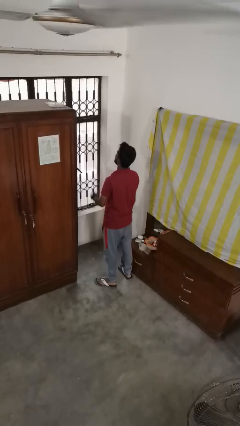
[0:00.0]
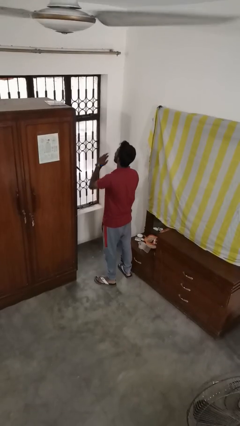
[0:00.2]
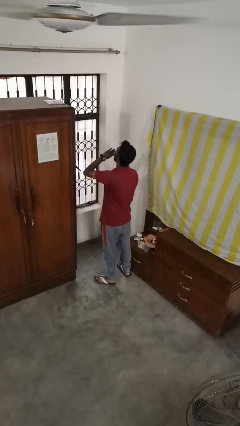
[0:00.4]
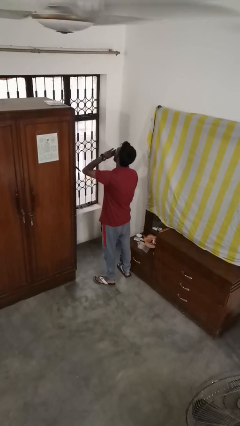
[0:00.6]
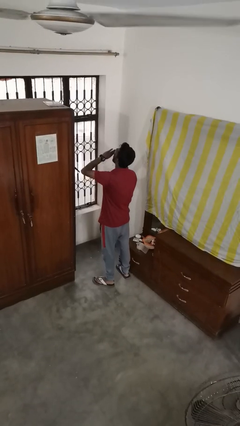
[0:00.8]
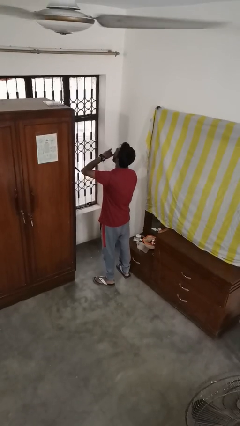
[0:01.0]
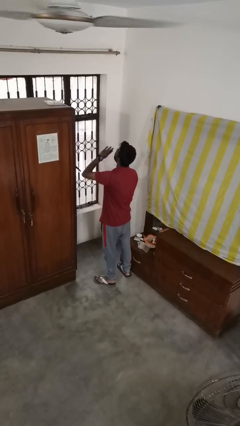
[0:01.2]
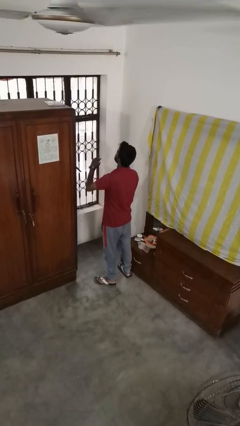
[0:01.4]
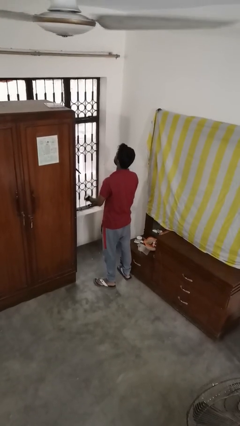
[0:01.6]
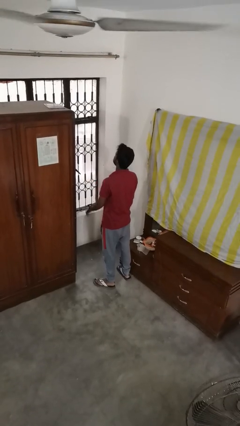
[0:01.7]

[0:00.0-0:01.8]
person yawns

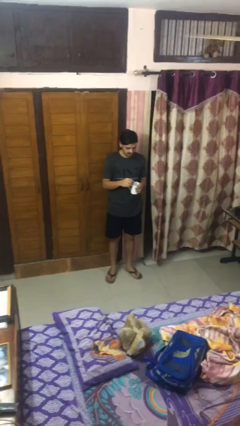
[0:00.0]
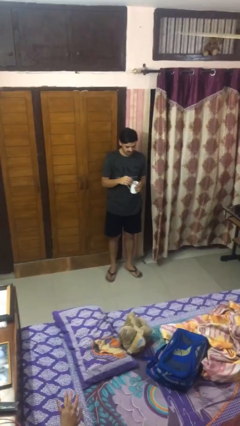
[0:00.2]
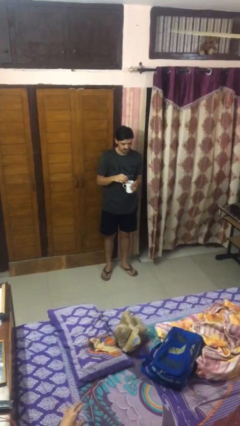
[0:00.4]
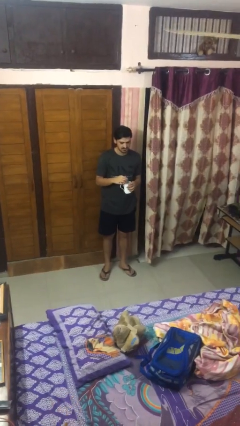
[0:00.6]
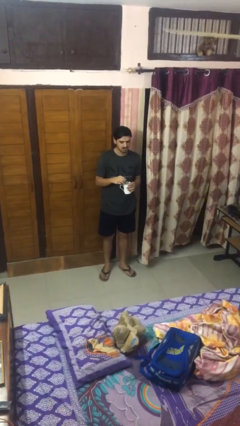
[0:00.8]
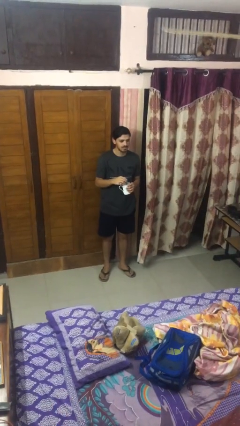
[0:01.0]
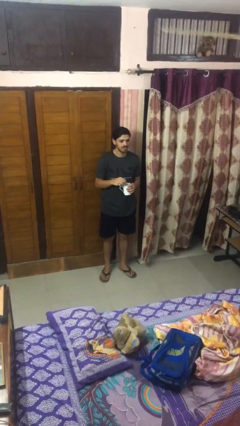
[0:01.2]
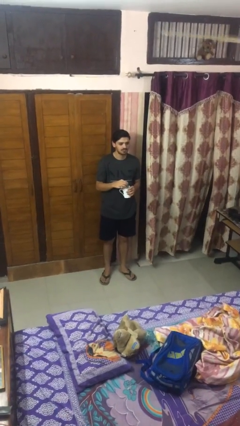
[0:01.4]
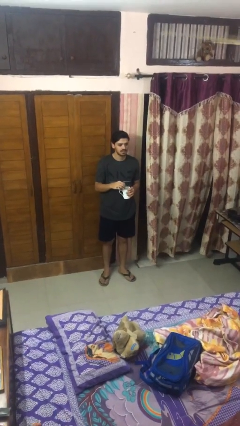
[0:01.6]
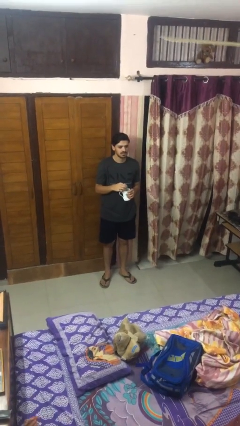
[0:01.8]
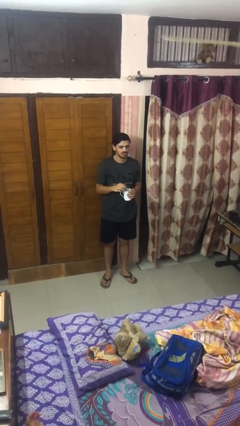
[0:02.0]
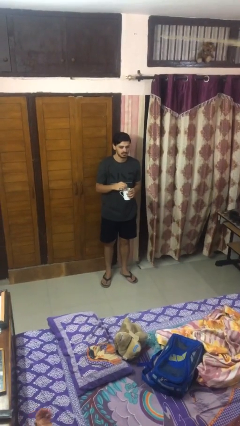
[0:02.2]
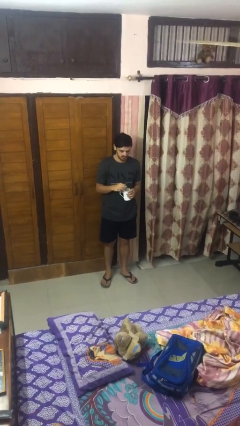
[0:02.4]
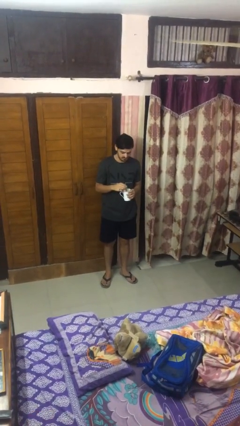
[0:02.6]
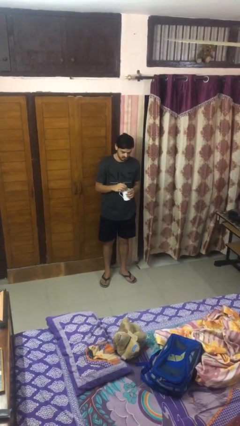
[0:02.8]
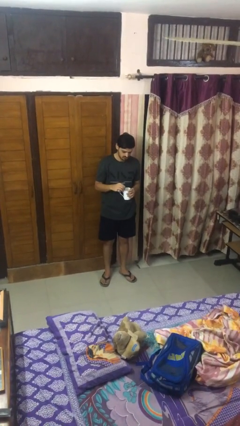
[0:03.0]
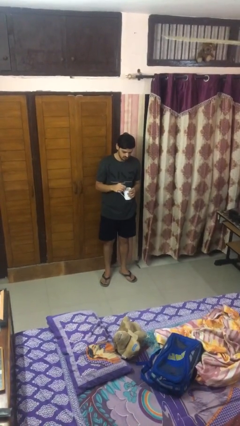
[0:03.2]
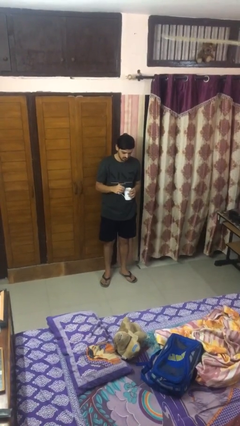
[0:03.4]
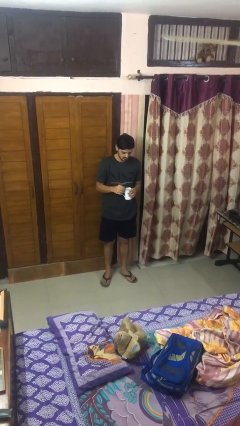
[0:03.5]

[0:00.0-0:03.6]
person stirs mug

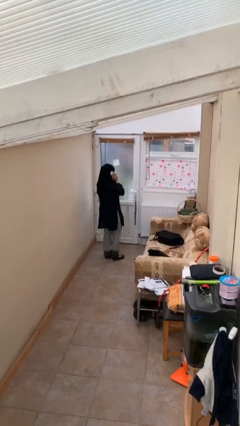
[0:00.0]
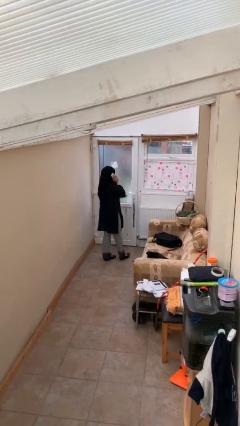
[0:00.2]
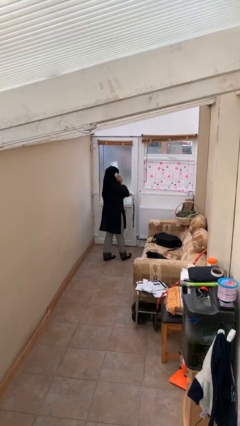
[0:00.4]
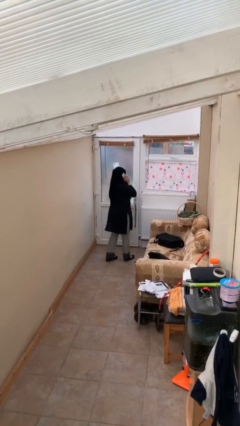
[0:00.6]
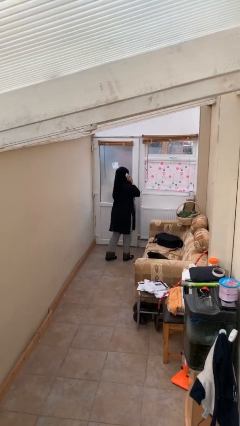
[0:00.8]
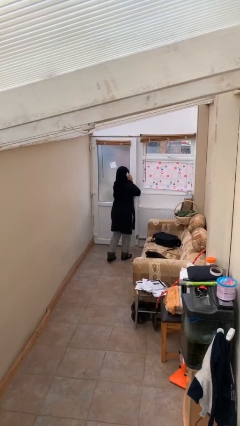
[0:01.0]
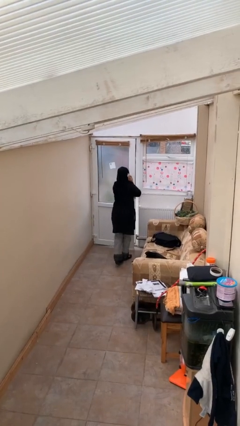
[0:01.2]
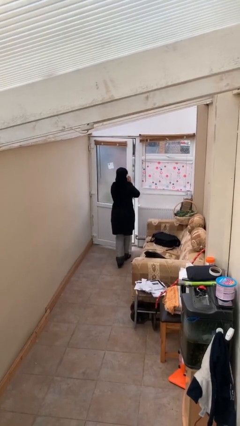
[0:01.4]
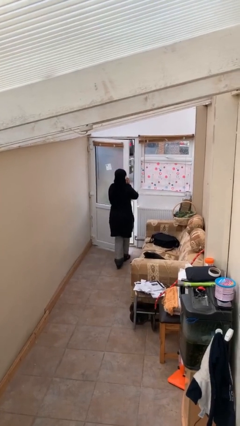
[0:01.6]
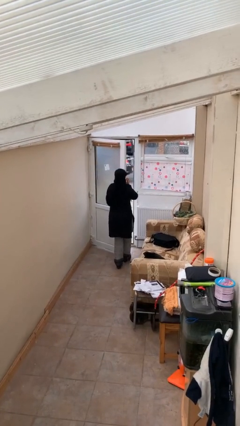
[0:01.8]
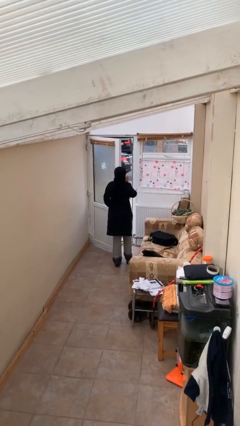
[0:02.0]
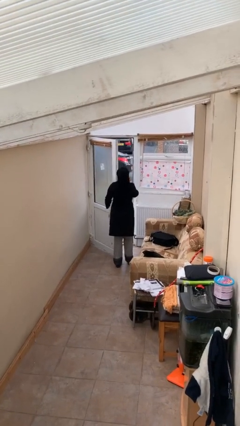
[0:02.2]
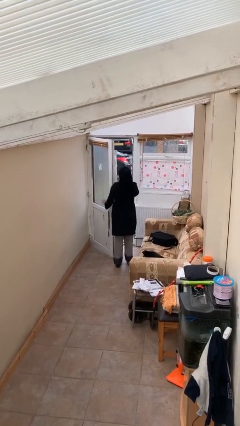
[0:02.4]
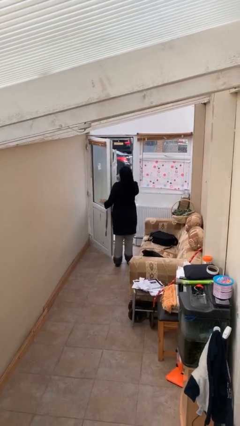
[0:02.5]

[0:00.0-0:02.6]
person opens facility door

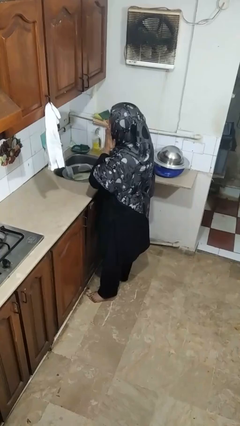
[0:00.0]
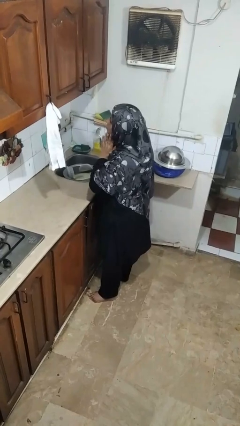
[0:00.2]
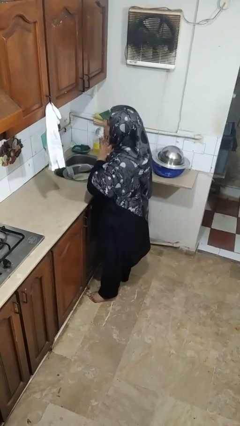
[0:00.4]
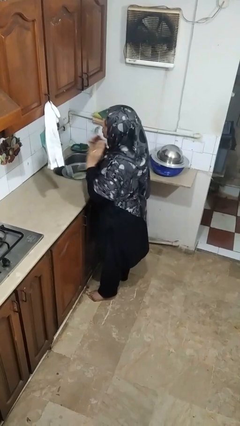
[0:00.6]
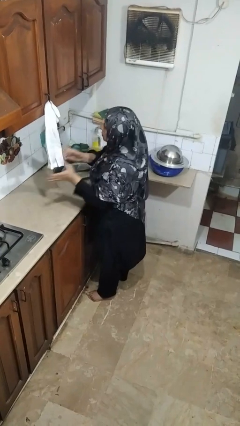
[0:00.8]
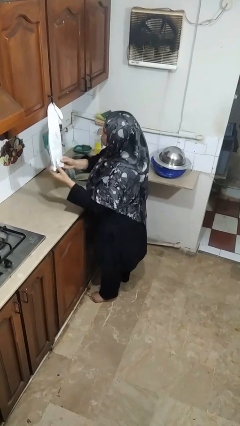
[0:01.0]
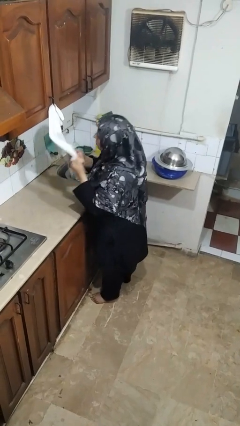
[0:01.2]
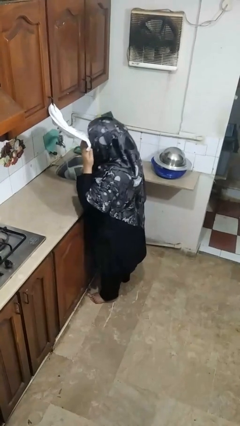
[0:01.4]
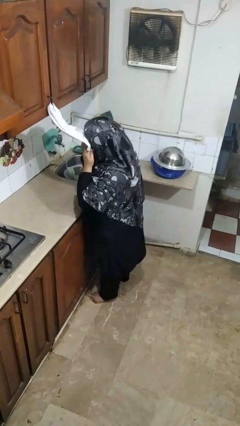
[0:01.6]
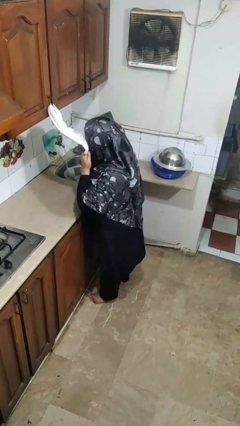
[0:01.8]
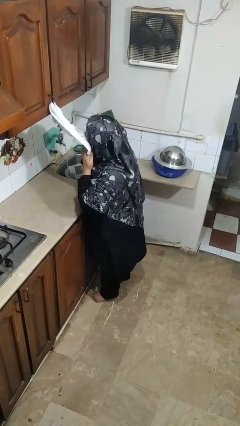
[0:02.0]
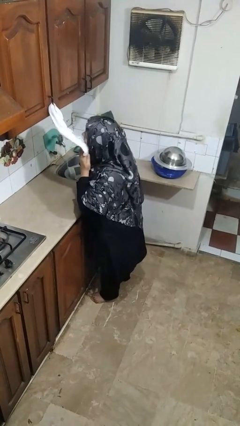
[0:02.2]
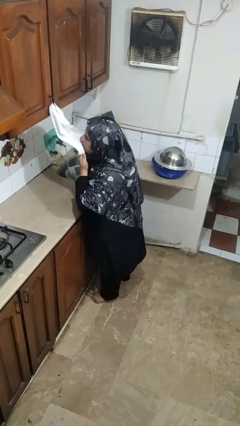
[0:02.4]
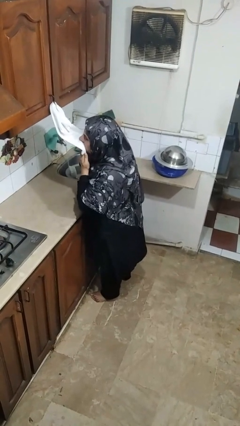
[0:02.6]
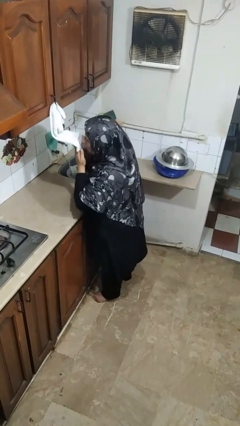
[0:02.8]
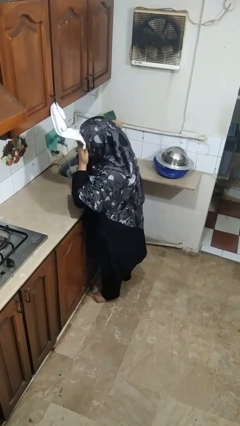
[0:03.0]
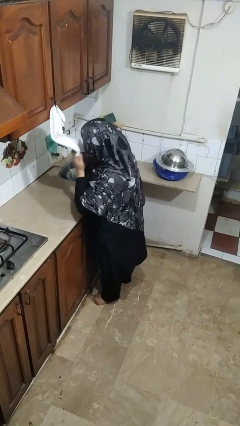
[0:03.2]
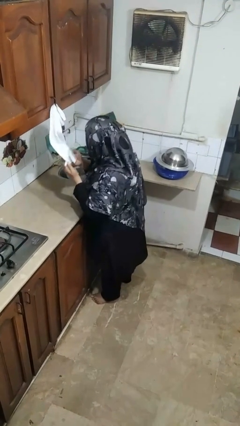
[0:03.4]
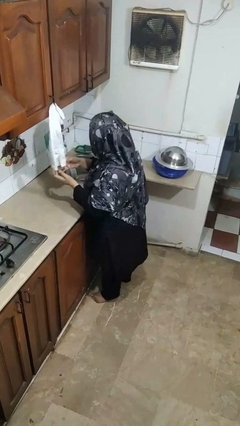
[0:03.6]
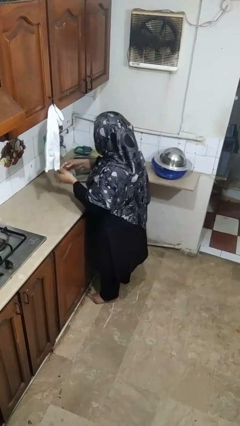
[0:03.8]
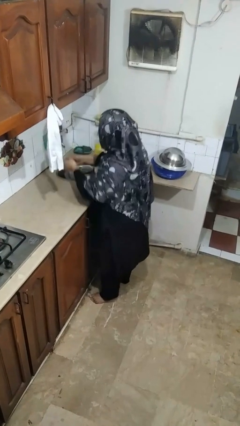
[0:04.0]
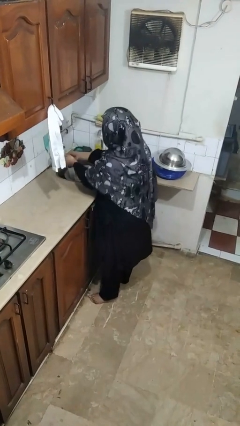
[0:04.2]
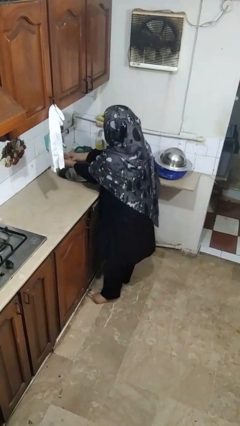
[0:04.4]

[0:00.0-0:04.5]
person dries face with towel

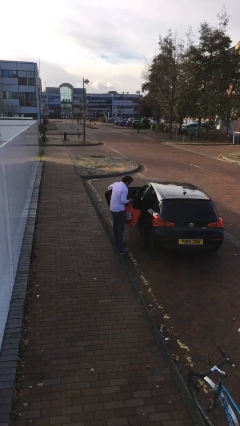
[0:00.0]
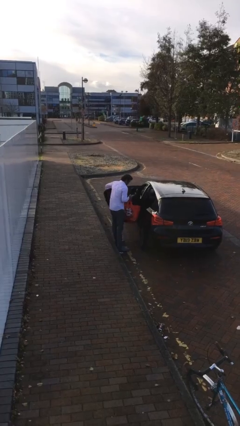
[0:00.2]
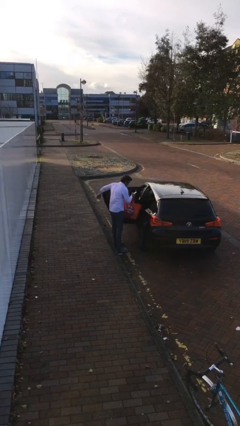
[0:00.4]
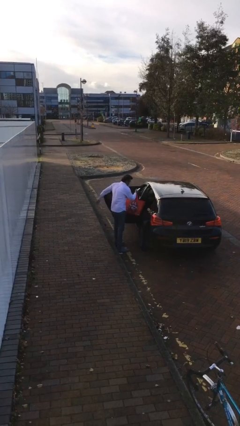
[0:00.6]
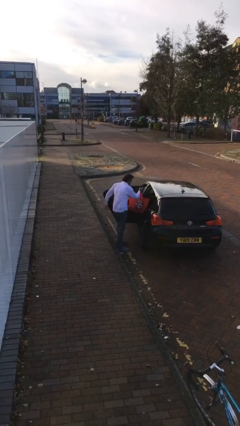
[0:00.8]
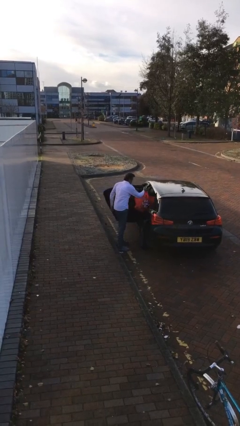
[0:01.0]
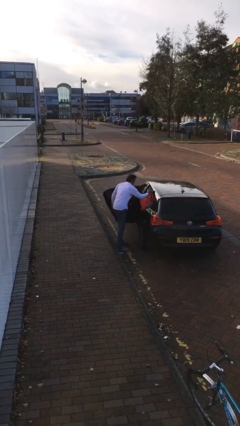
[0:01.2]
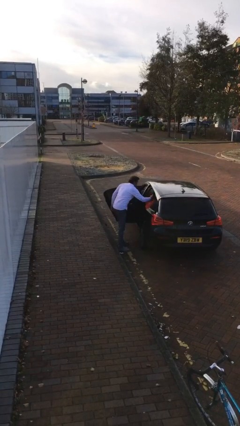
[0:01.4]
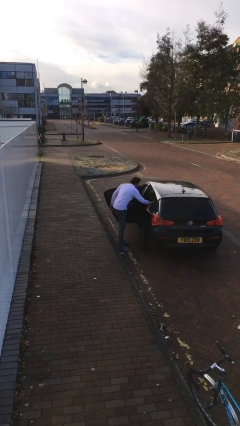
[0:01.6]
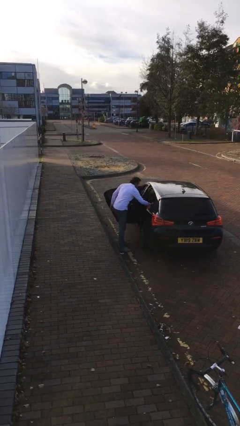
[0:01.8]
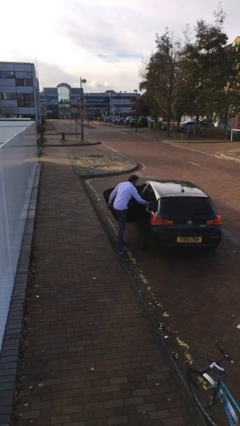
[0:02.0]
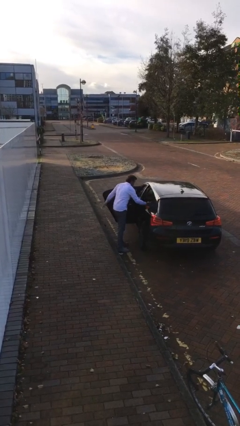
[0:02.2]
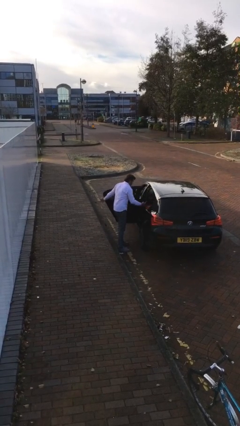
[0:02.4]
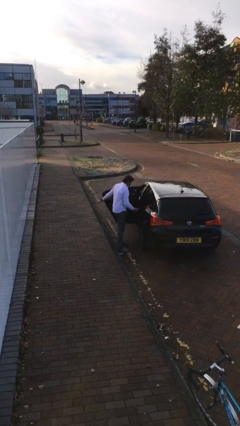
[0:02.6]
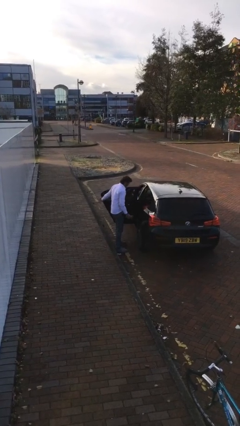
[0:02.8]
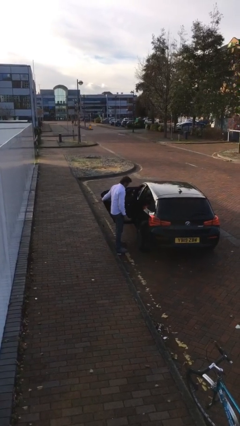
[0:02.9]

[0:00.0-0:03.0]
person loads car

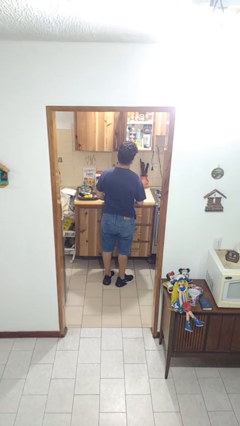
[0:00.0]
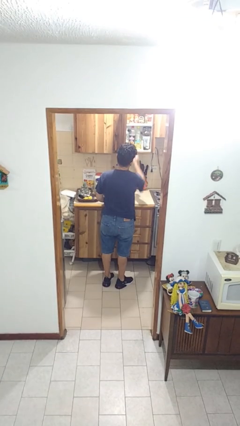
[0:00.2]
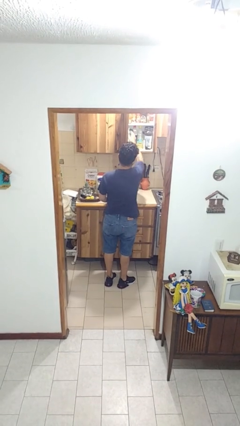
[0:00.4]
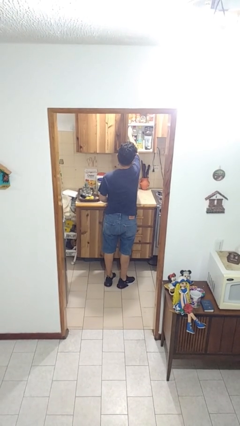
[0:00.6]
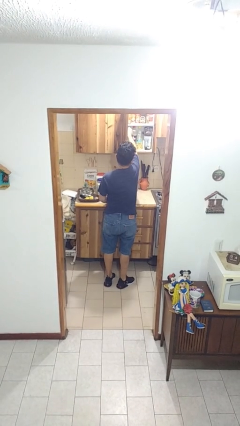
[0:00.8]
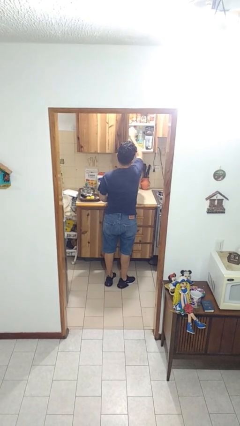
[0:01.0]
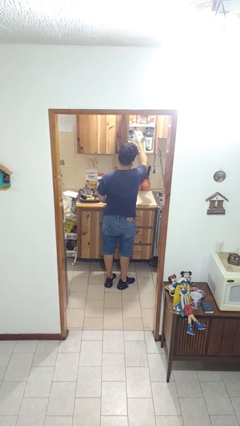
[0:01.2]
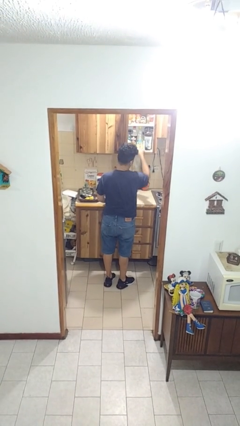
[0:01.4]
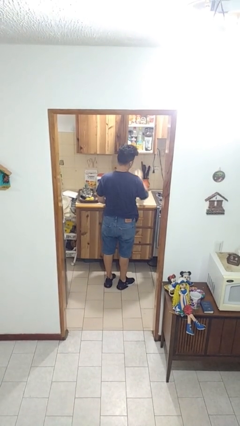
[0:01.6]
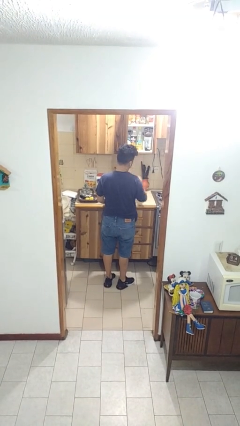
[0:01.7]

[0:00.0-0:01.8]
person takes object from cabinet

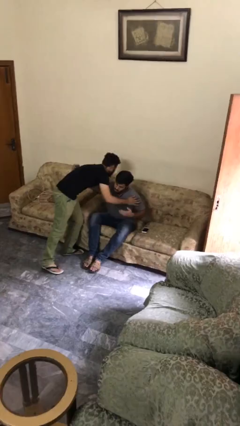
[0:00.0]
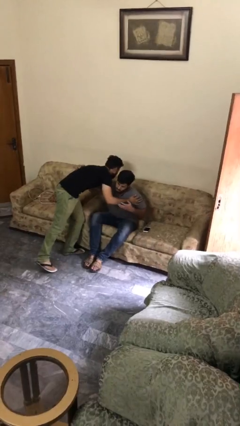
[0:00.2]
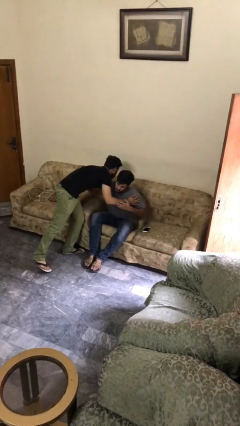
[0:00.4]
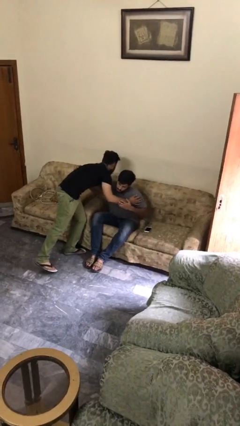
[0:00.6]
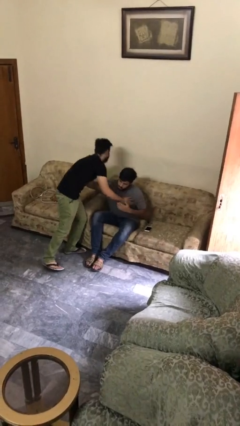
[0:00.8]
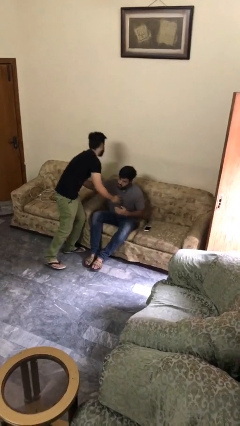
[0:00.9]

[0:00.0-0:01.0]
person embraces person
